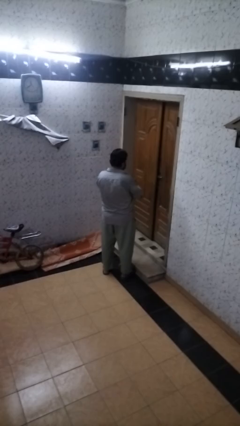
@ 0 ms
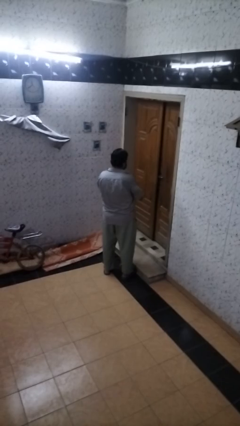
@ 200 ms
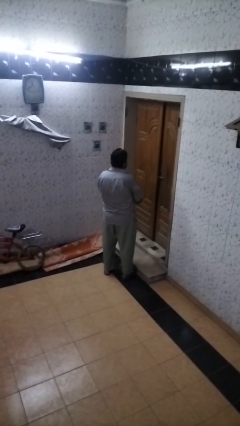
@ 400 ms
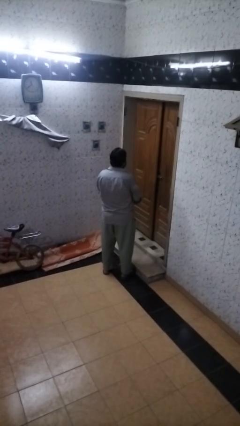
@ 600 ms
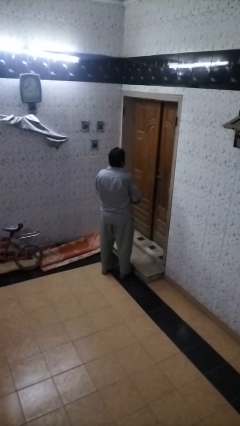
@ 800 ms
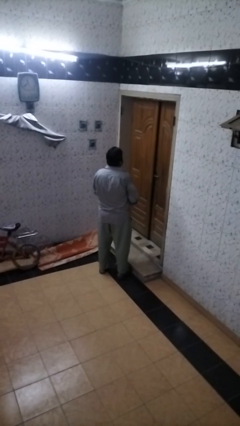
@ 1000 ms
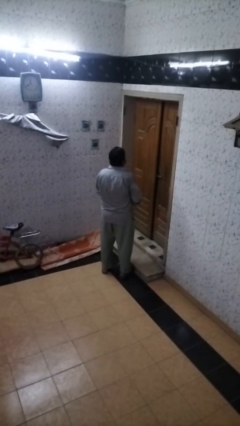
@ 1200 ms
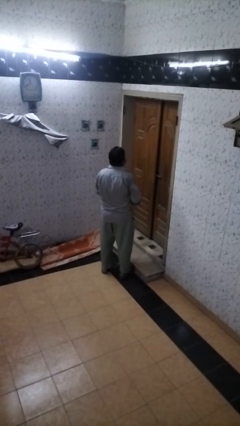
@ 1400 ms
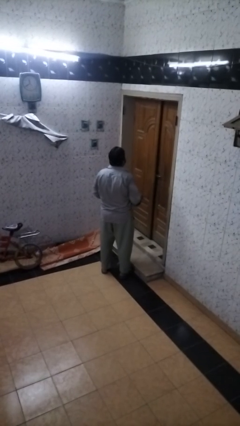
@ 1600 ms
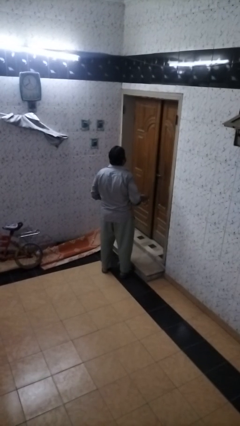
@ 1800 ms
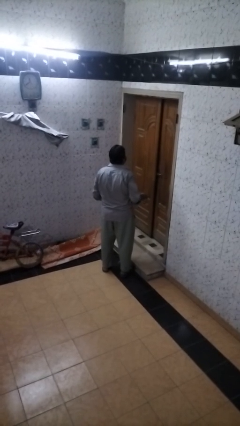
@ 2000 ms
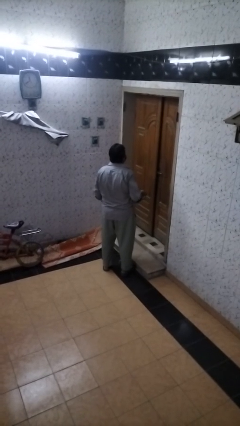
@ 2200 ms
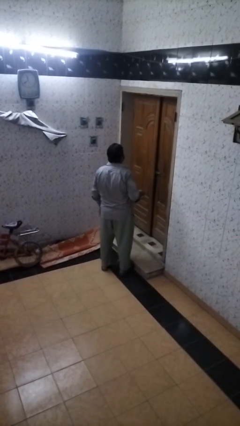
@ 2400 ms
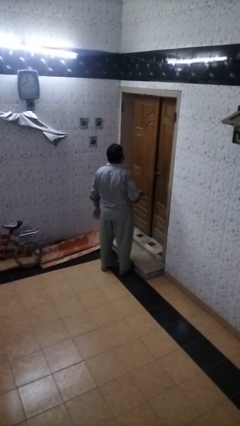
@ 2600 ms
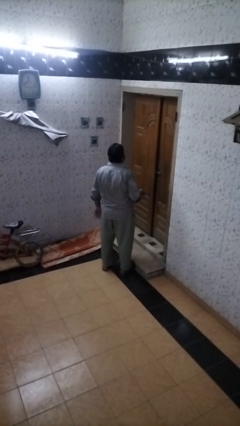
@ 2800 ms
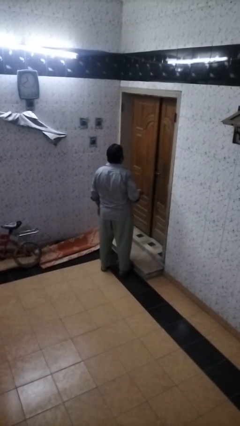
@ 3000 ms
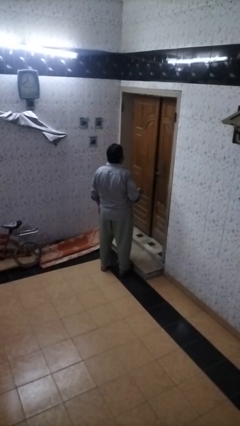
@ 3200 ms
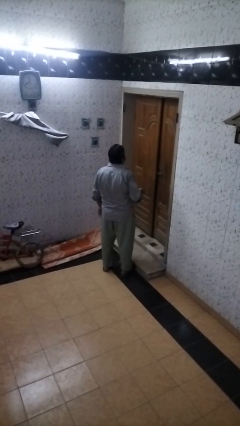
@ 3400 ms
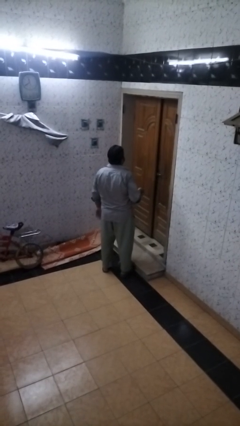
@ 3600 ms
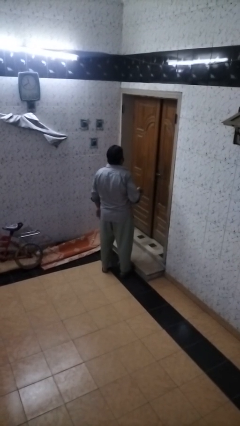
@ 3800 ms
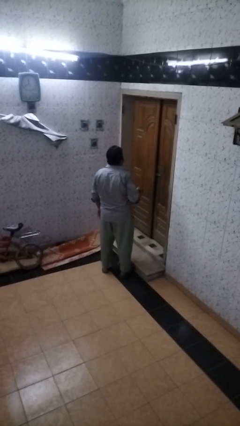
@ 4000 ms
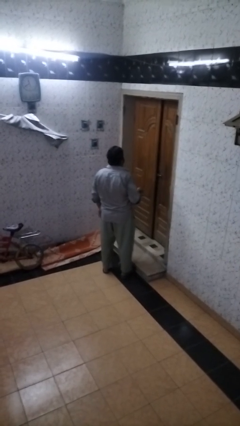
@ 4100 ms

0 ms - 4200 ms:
person takes off wristwatch

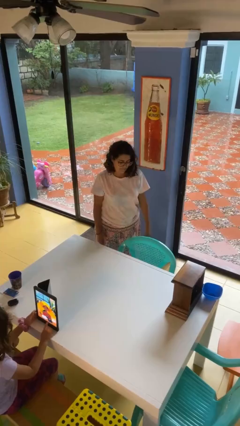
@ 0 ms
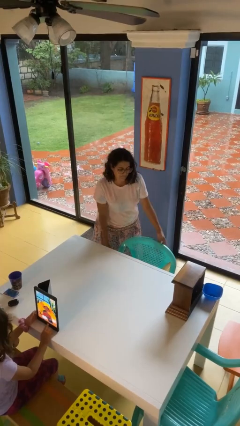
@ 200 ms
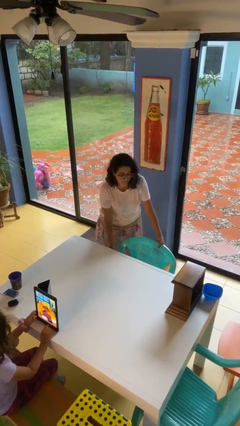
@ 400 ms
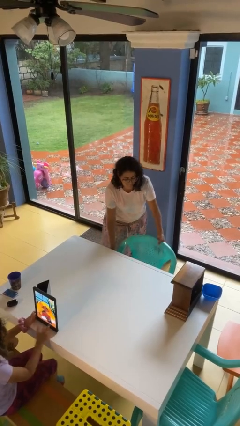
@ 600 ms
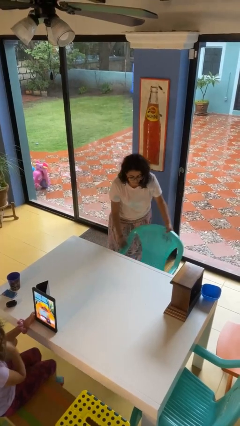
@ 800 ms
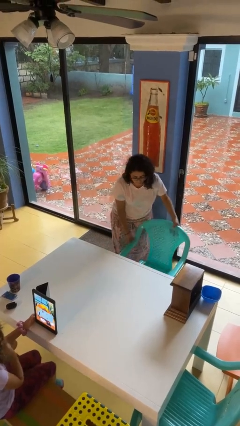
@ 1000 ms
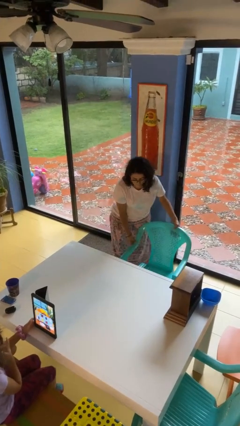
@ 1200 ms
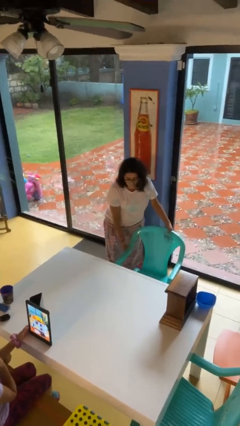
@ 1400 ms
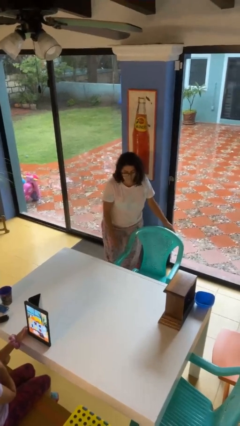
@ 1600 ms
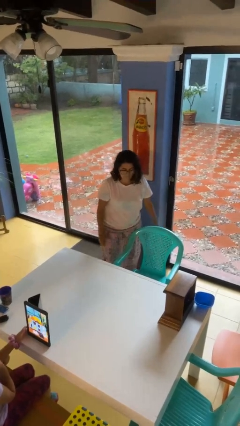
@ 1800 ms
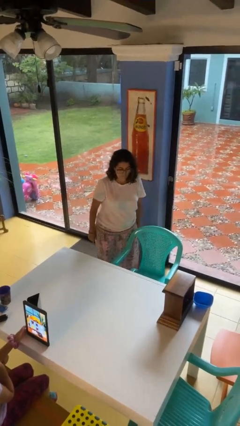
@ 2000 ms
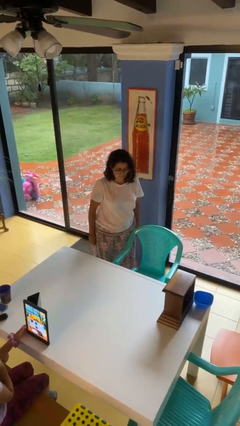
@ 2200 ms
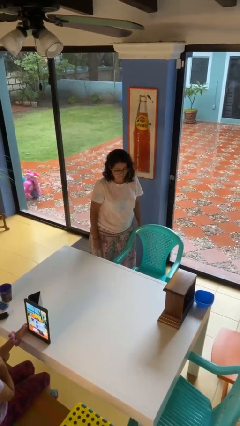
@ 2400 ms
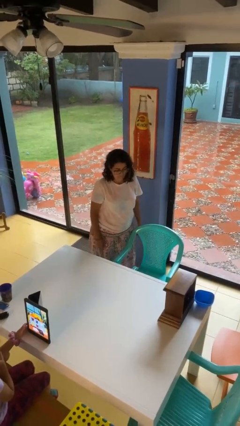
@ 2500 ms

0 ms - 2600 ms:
person pulls out chair

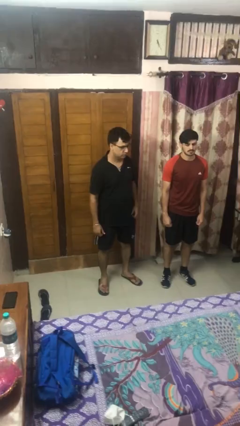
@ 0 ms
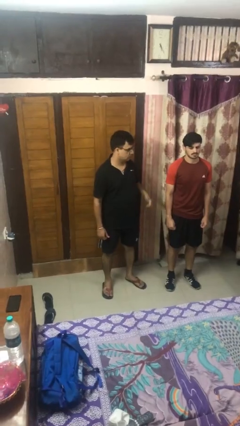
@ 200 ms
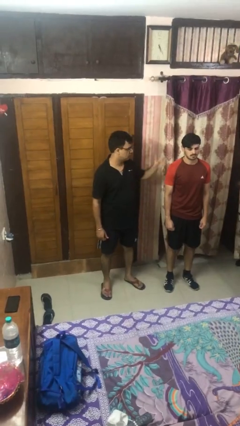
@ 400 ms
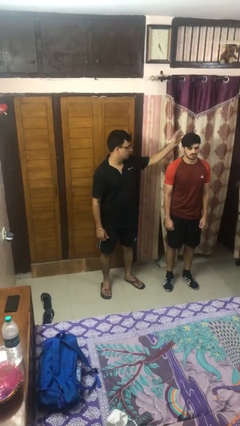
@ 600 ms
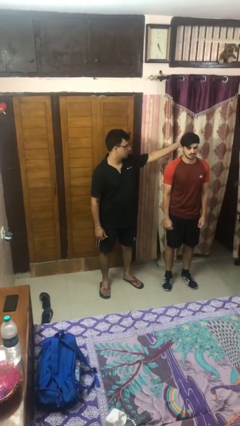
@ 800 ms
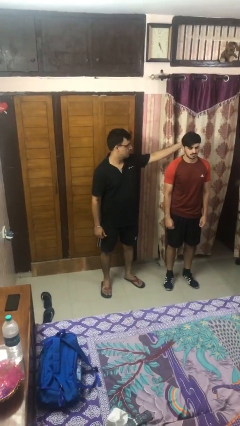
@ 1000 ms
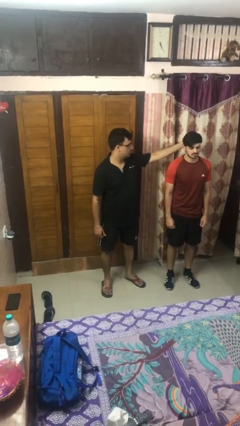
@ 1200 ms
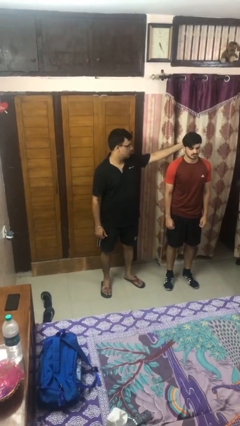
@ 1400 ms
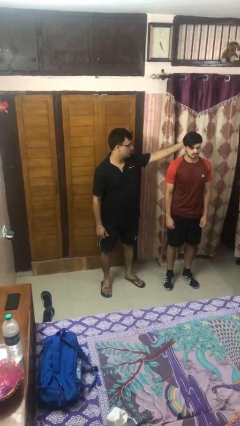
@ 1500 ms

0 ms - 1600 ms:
person grabs person by hair

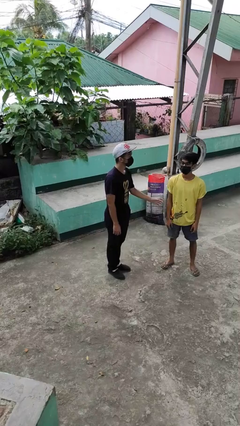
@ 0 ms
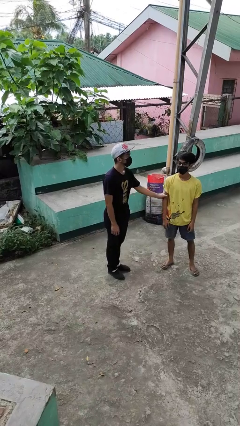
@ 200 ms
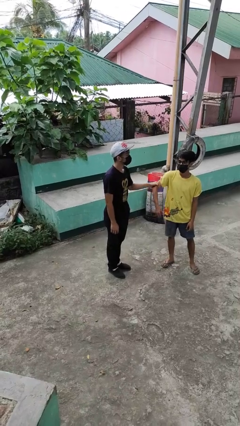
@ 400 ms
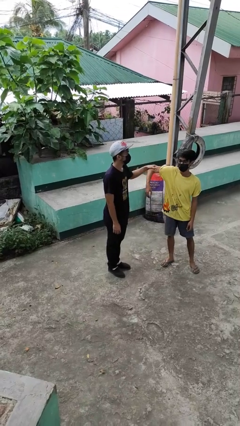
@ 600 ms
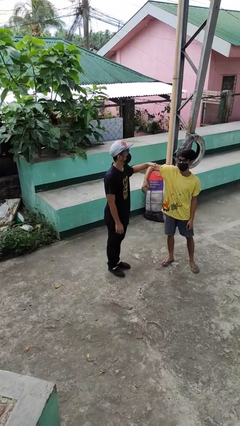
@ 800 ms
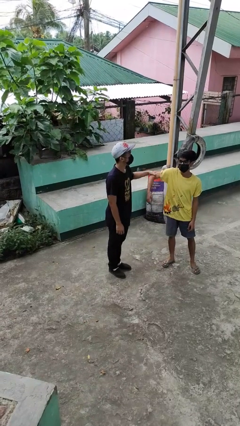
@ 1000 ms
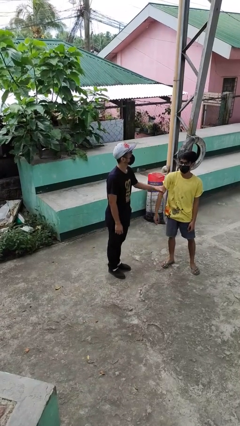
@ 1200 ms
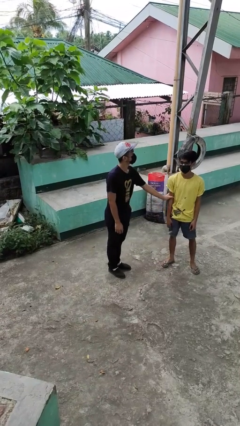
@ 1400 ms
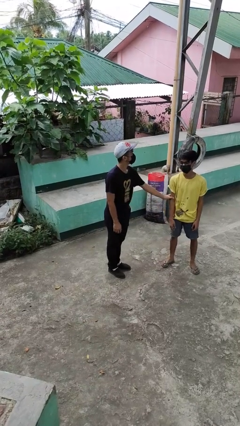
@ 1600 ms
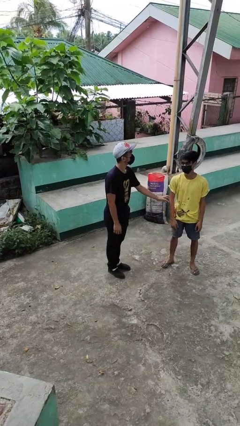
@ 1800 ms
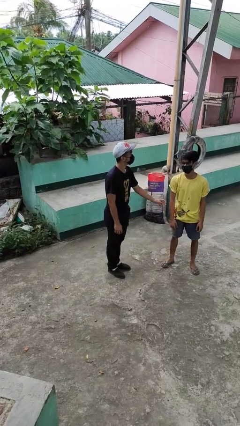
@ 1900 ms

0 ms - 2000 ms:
person grabs person by bicep

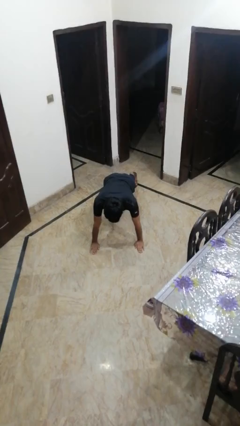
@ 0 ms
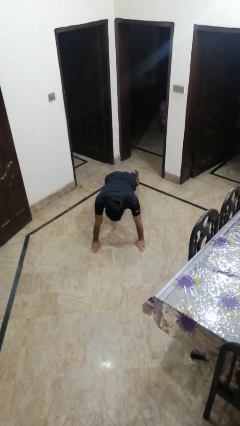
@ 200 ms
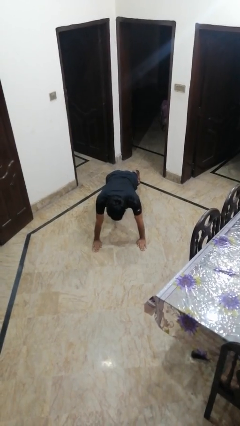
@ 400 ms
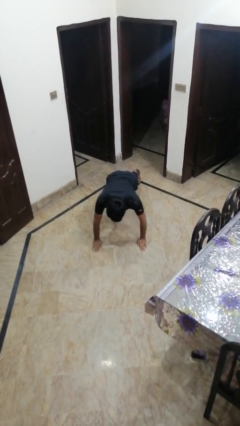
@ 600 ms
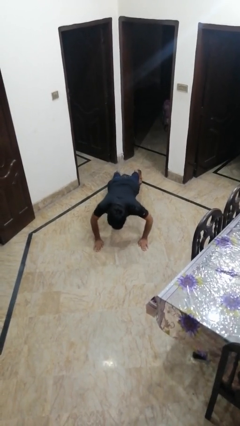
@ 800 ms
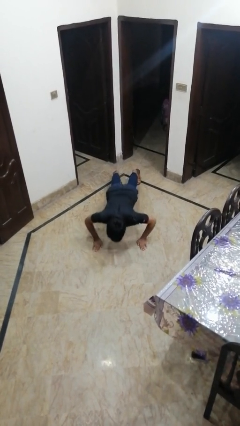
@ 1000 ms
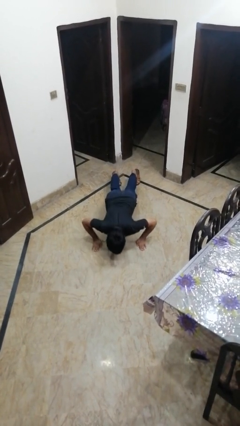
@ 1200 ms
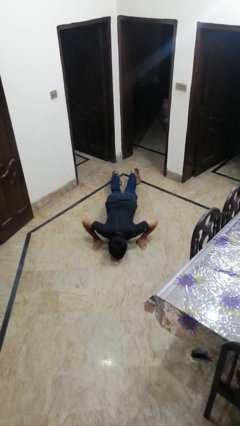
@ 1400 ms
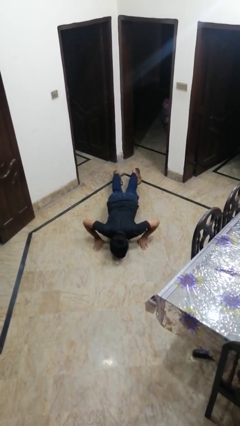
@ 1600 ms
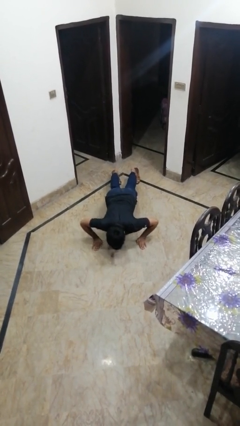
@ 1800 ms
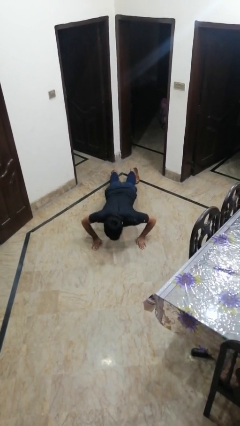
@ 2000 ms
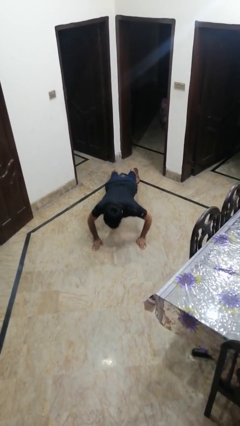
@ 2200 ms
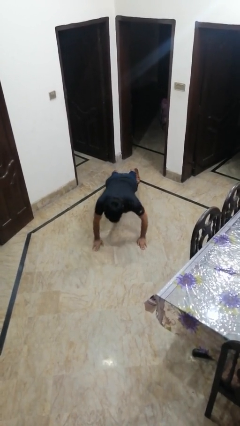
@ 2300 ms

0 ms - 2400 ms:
person exercises with pushup

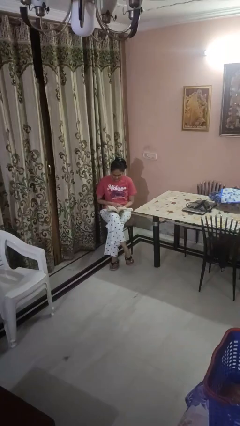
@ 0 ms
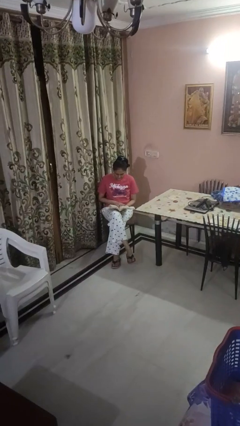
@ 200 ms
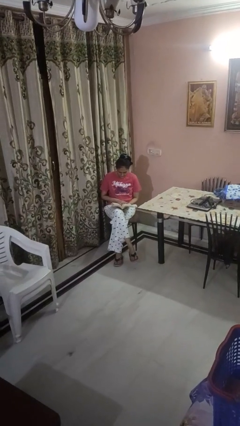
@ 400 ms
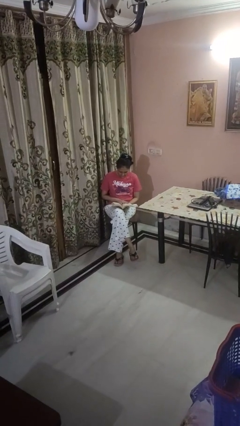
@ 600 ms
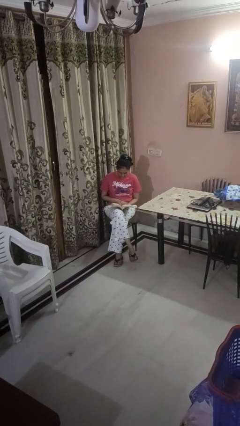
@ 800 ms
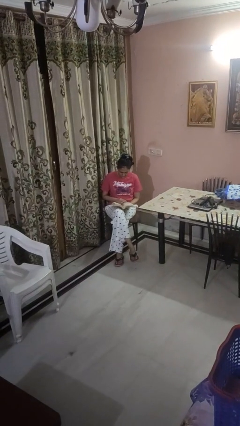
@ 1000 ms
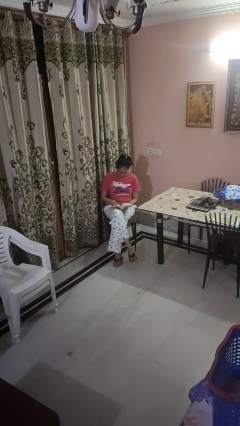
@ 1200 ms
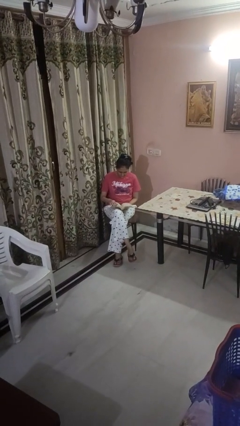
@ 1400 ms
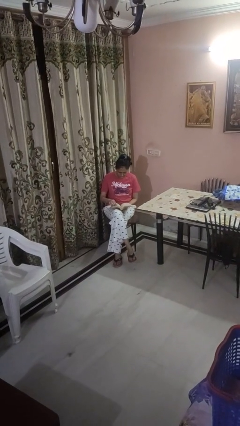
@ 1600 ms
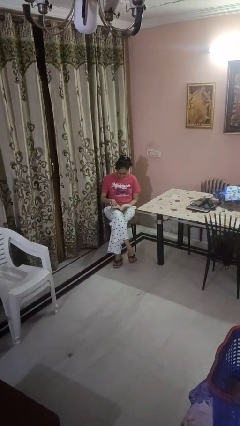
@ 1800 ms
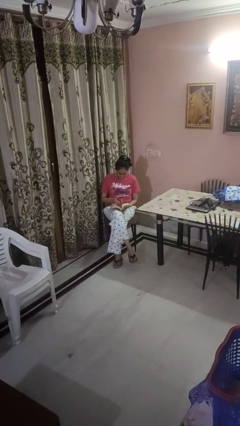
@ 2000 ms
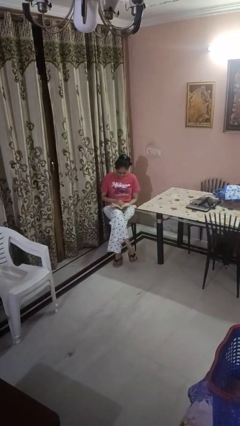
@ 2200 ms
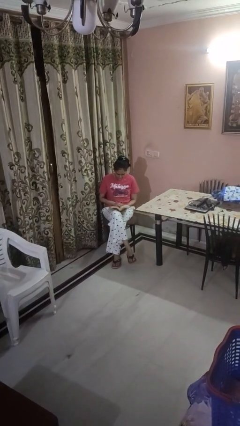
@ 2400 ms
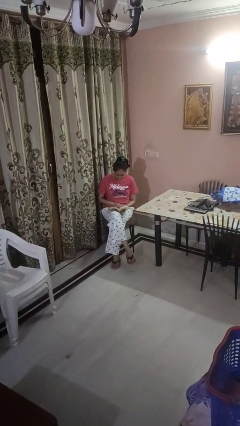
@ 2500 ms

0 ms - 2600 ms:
person reads book

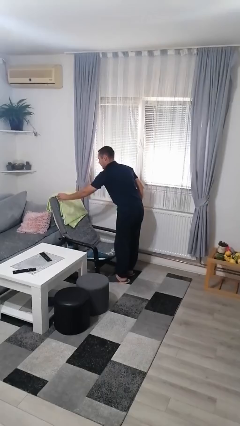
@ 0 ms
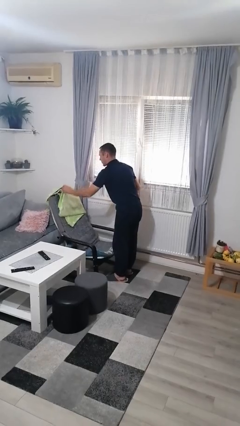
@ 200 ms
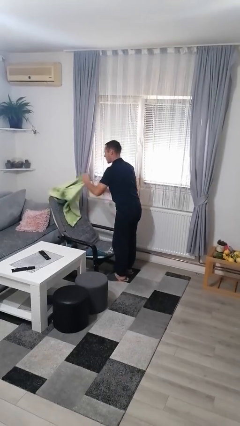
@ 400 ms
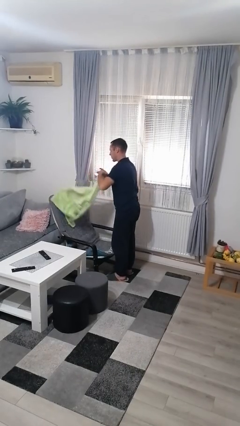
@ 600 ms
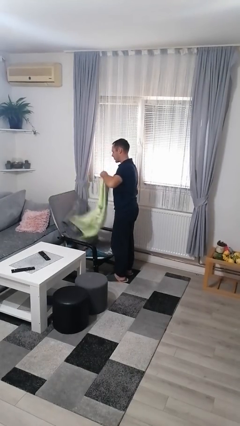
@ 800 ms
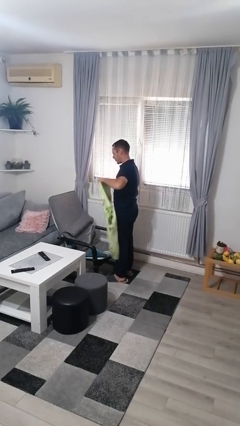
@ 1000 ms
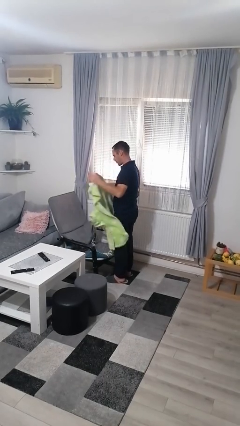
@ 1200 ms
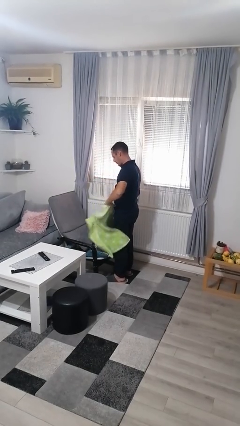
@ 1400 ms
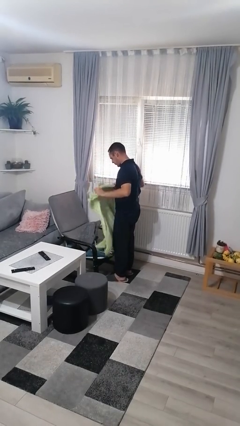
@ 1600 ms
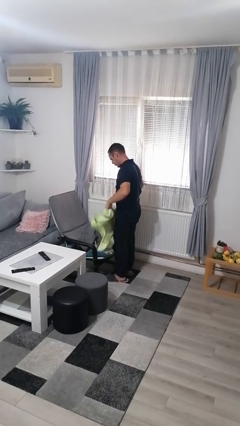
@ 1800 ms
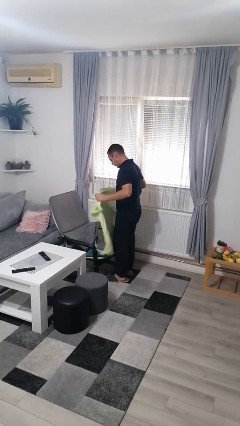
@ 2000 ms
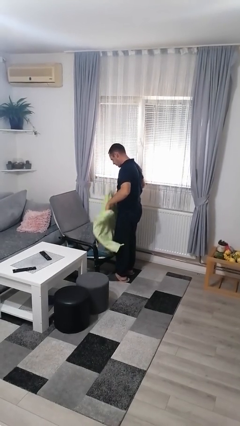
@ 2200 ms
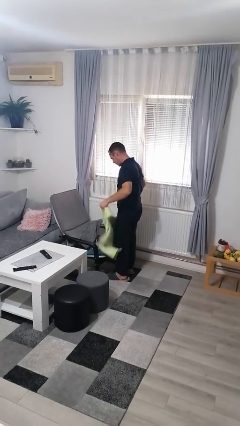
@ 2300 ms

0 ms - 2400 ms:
person unfolds blanket
